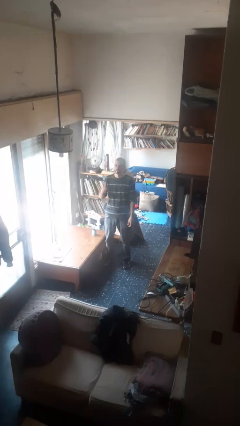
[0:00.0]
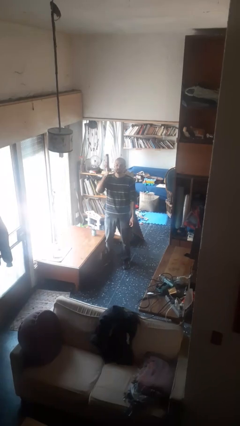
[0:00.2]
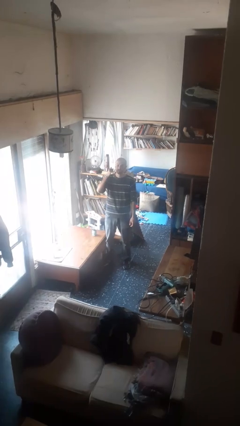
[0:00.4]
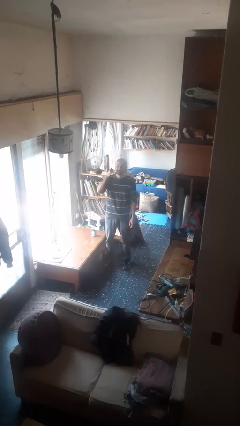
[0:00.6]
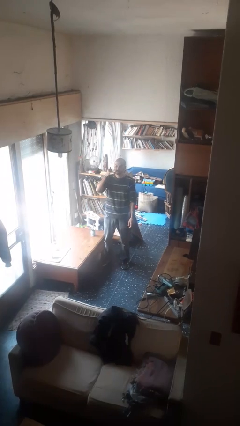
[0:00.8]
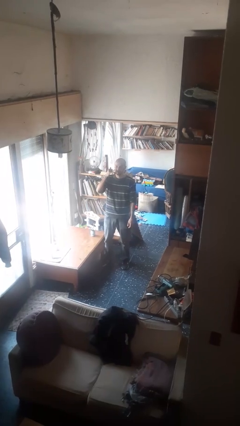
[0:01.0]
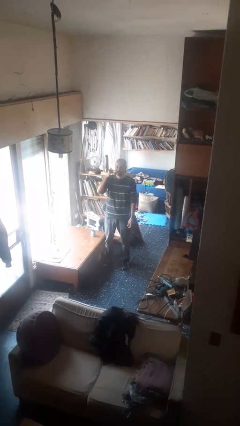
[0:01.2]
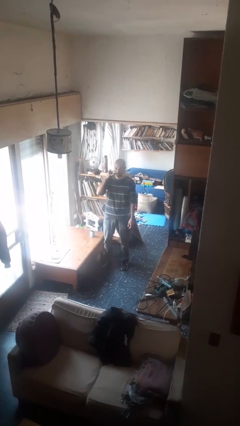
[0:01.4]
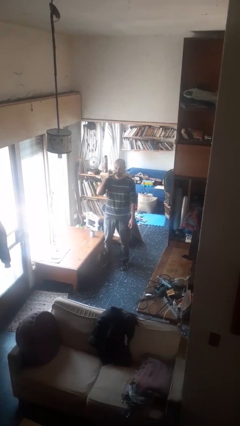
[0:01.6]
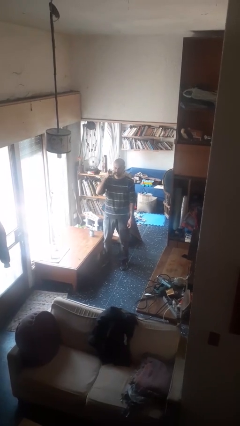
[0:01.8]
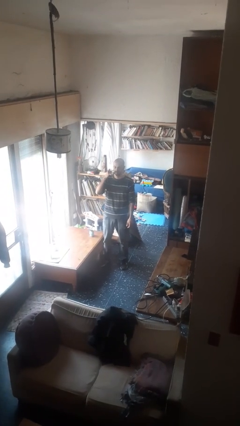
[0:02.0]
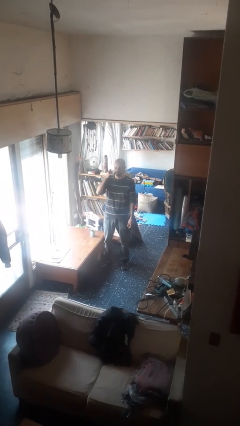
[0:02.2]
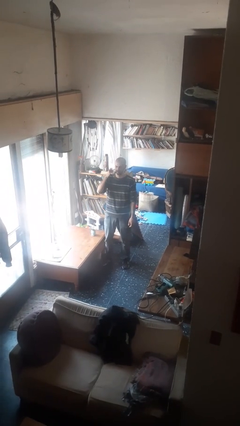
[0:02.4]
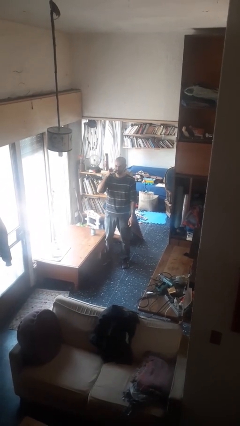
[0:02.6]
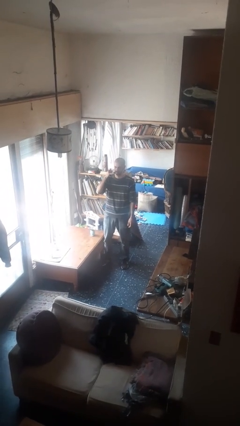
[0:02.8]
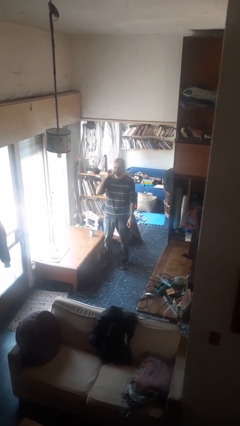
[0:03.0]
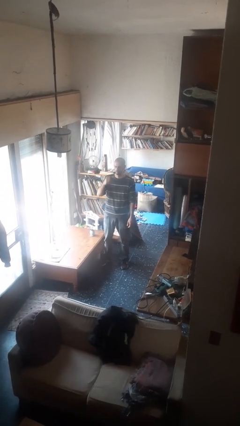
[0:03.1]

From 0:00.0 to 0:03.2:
person gestures call me

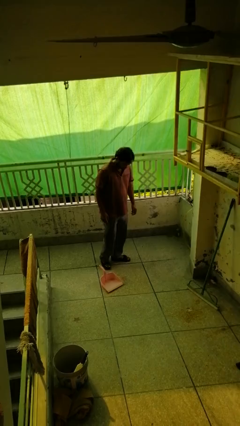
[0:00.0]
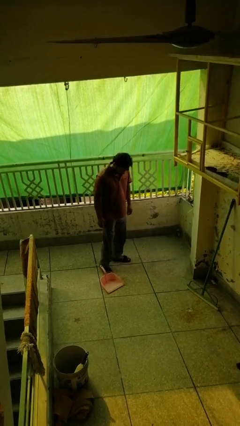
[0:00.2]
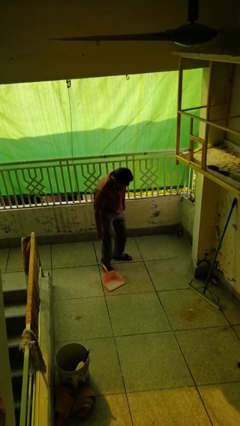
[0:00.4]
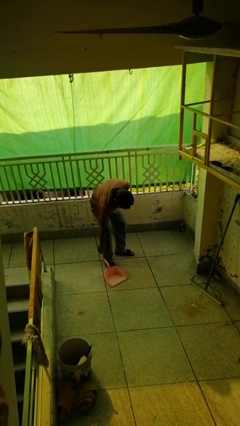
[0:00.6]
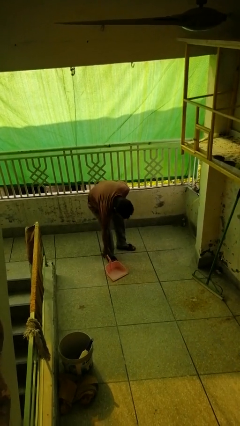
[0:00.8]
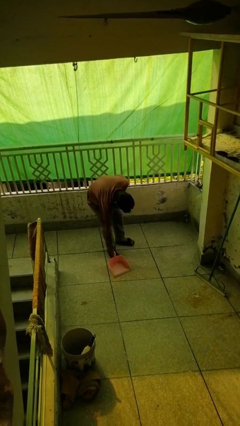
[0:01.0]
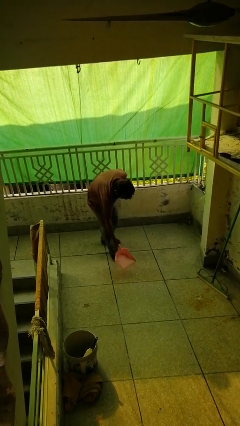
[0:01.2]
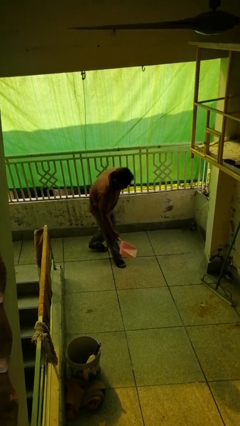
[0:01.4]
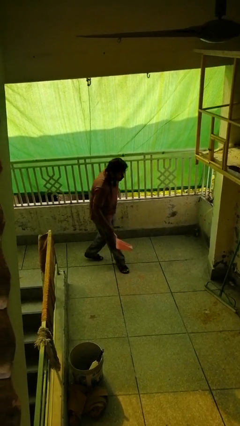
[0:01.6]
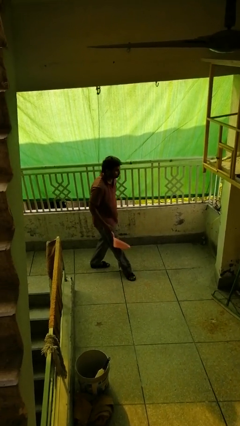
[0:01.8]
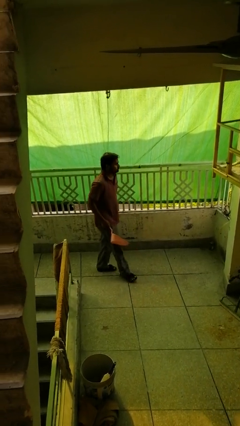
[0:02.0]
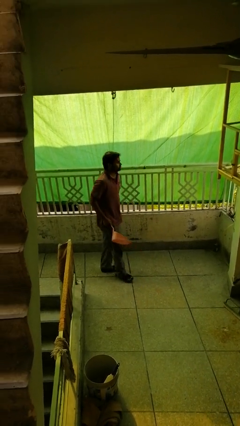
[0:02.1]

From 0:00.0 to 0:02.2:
person picks up object from floor

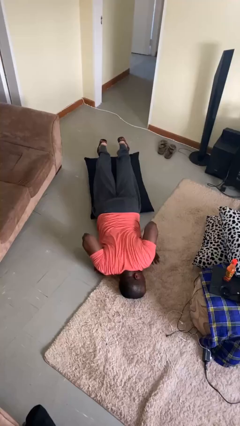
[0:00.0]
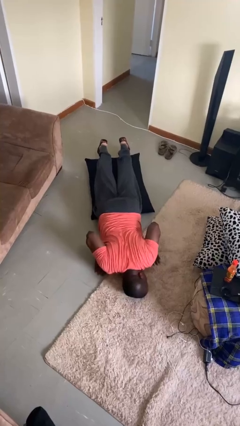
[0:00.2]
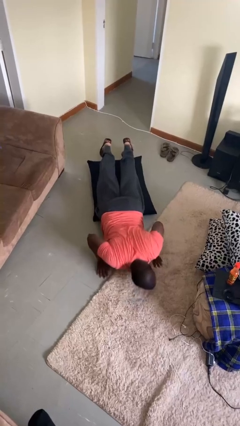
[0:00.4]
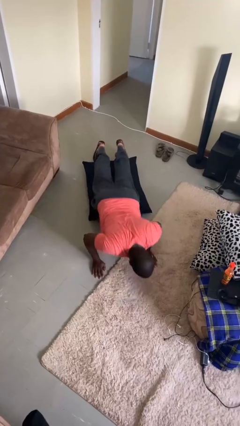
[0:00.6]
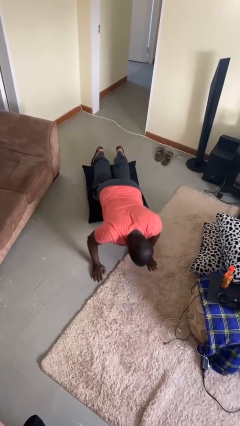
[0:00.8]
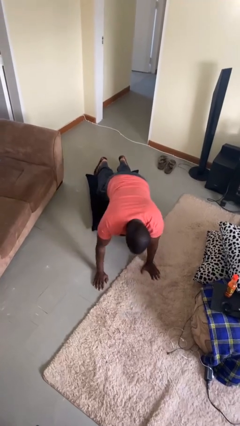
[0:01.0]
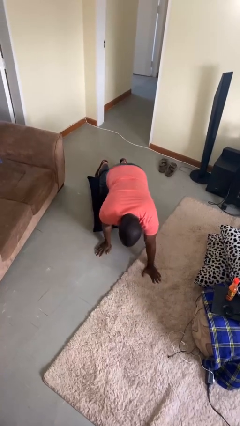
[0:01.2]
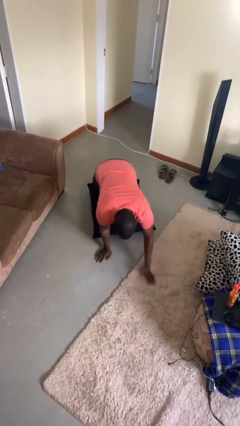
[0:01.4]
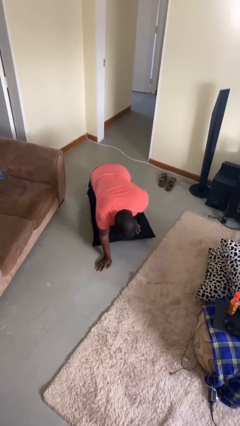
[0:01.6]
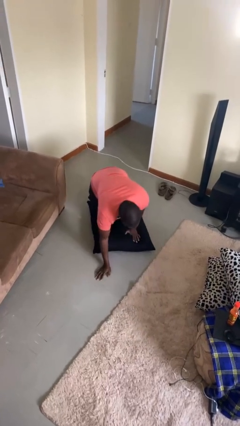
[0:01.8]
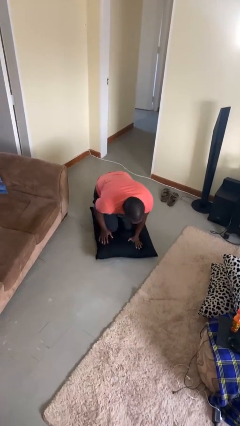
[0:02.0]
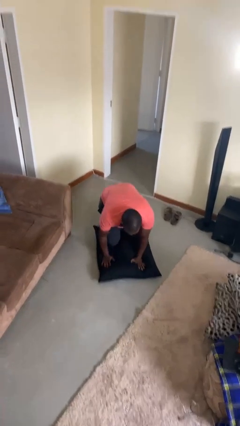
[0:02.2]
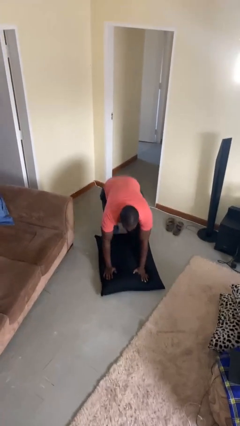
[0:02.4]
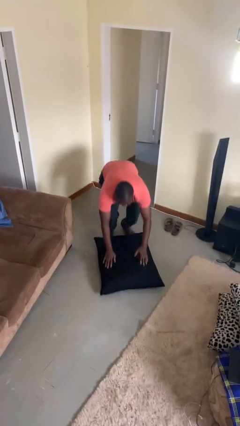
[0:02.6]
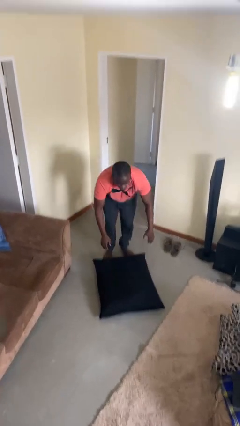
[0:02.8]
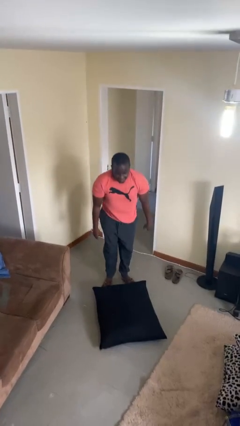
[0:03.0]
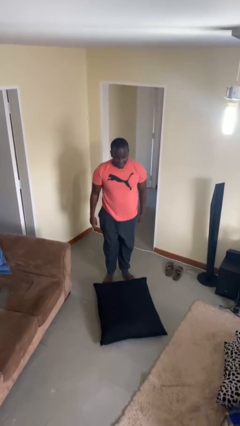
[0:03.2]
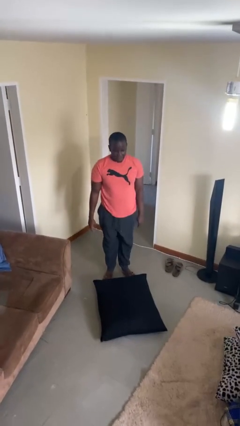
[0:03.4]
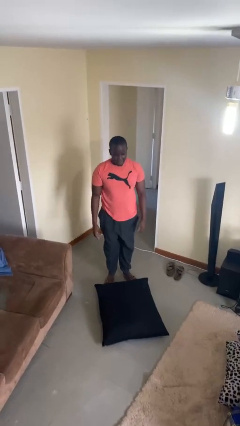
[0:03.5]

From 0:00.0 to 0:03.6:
person stands up from floor

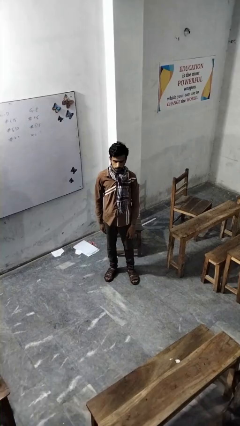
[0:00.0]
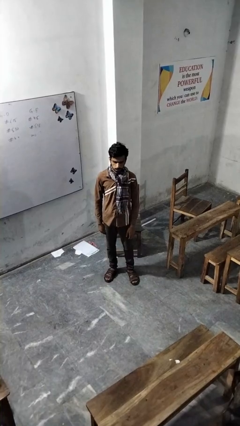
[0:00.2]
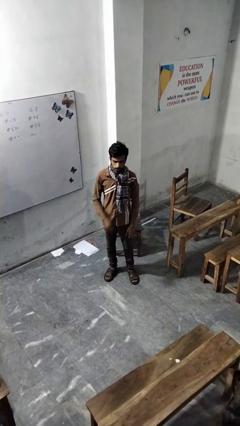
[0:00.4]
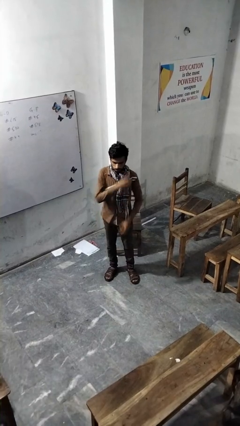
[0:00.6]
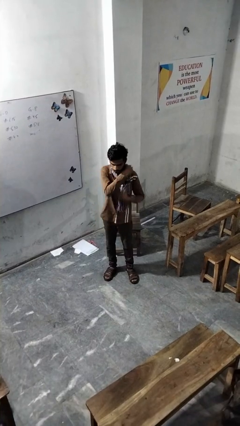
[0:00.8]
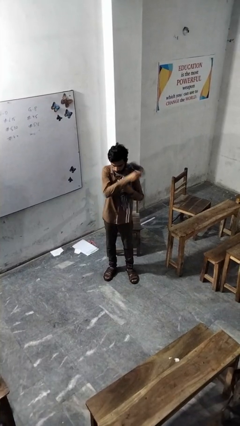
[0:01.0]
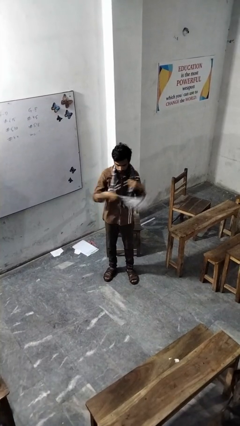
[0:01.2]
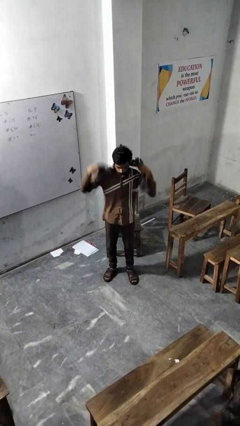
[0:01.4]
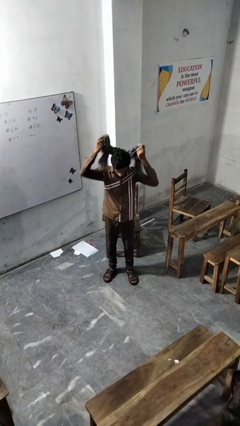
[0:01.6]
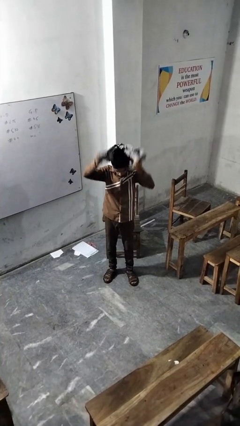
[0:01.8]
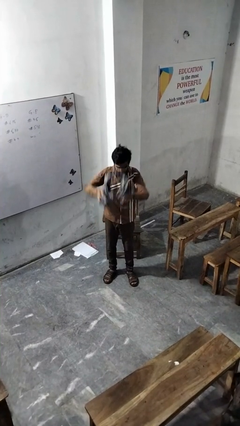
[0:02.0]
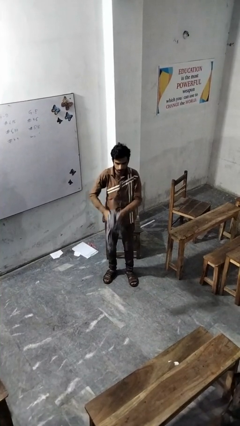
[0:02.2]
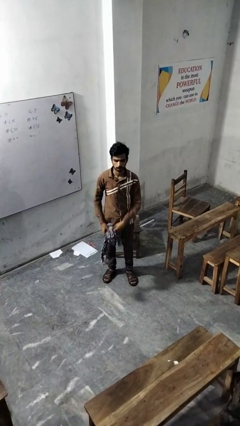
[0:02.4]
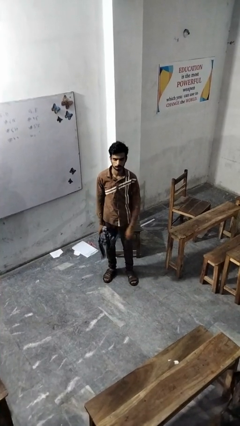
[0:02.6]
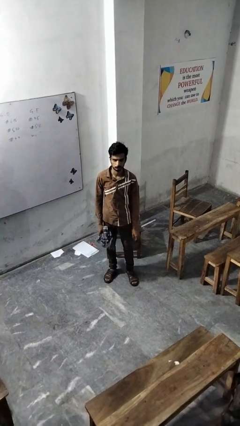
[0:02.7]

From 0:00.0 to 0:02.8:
person takes off scarf

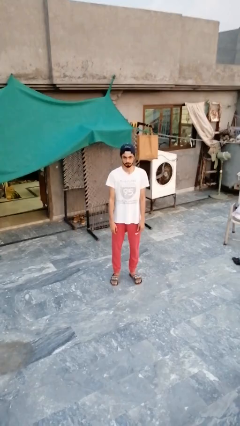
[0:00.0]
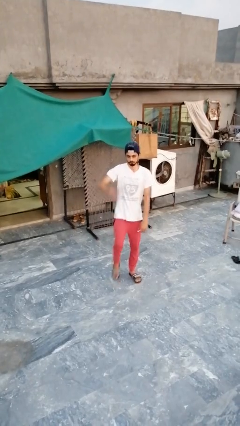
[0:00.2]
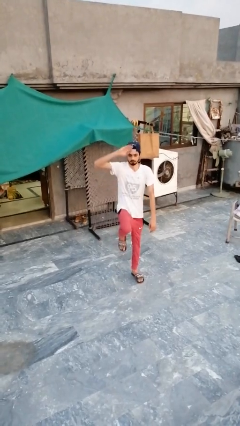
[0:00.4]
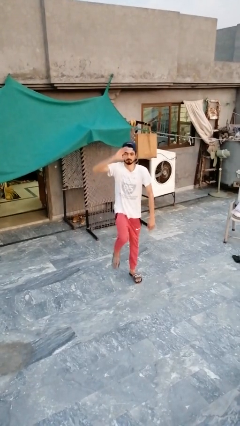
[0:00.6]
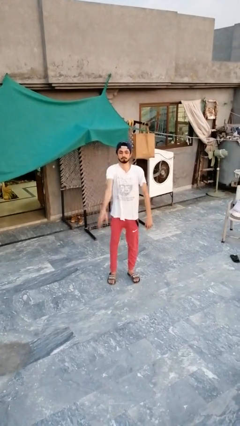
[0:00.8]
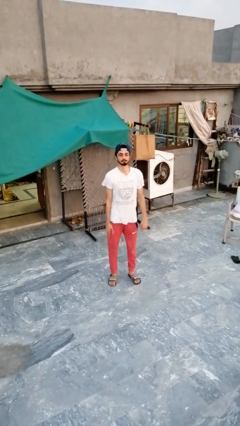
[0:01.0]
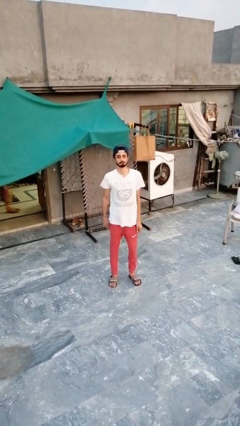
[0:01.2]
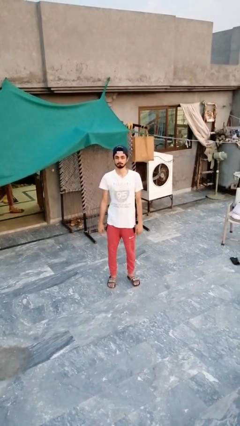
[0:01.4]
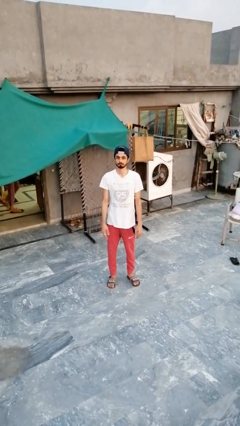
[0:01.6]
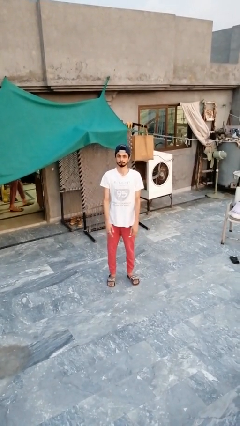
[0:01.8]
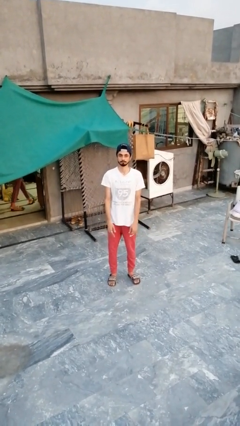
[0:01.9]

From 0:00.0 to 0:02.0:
person salutes

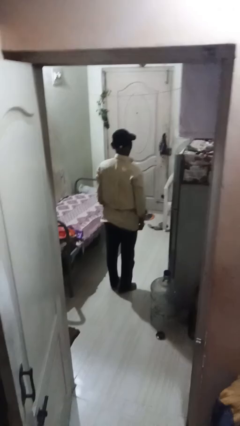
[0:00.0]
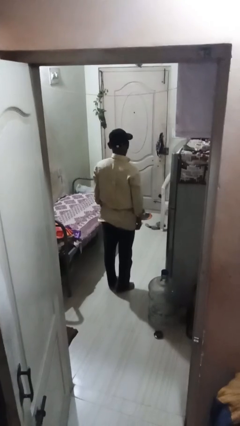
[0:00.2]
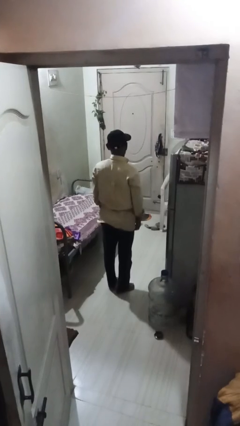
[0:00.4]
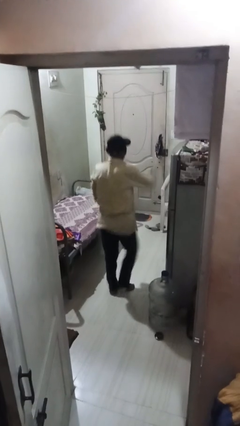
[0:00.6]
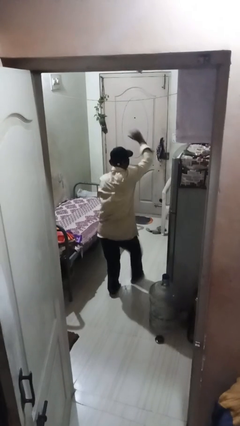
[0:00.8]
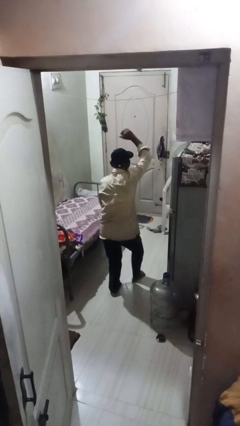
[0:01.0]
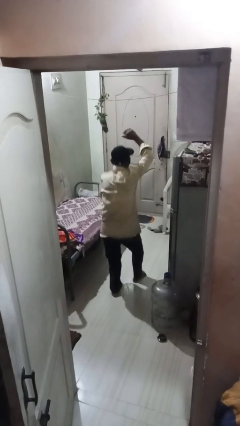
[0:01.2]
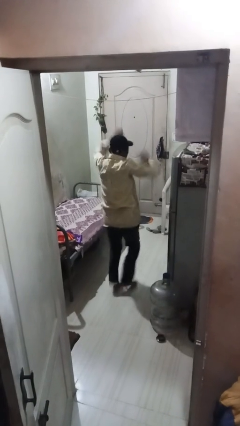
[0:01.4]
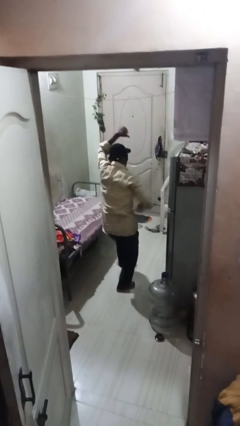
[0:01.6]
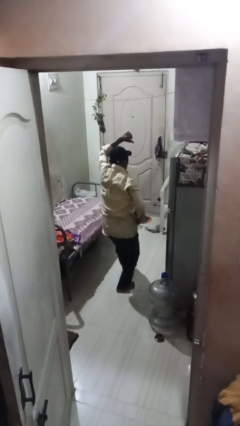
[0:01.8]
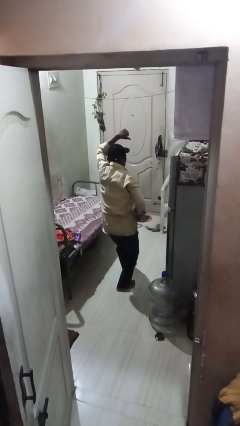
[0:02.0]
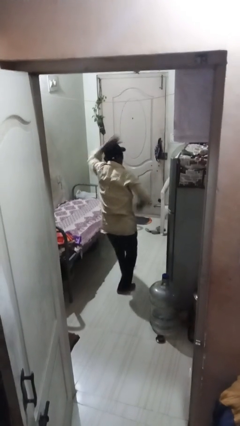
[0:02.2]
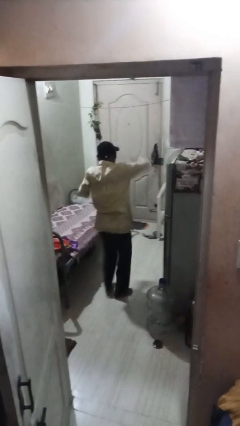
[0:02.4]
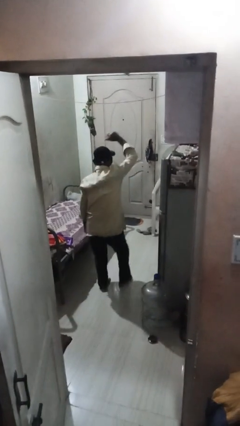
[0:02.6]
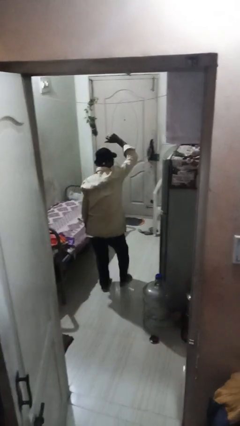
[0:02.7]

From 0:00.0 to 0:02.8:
person dances in place

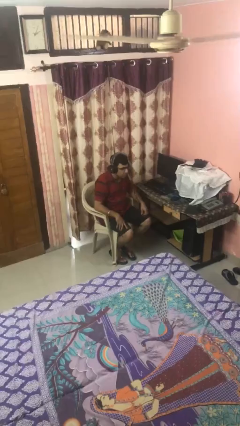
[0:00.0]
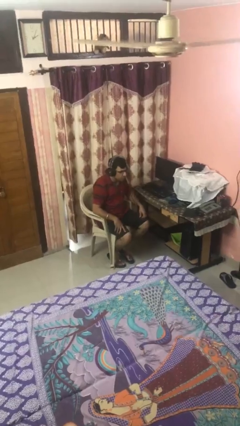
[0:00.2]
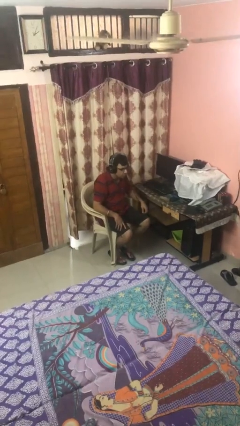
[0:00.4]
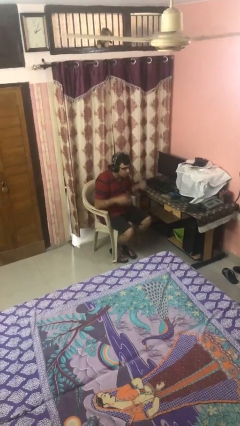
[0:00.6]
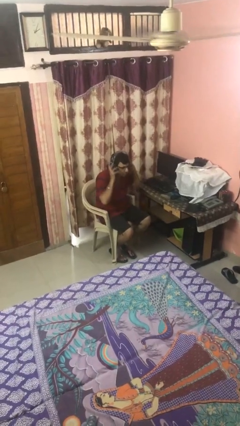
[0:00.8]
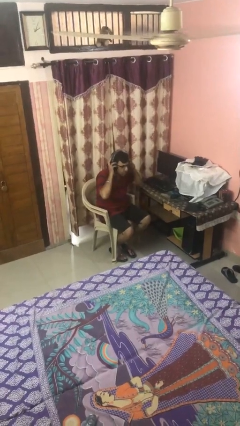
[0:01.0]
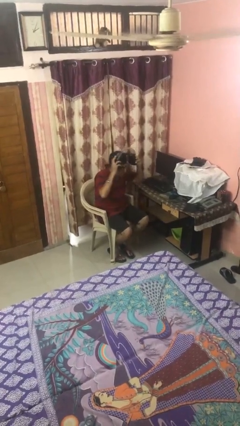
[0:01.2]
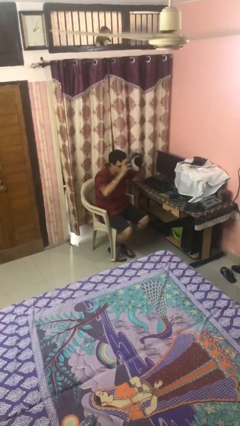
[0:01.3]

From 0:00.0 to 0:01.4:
person takes off headphones
